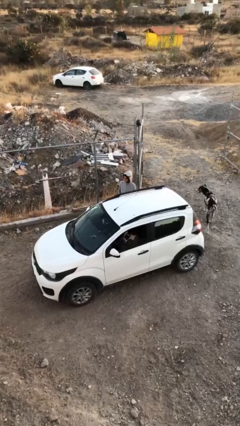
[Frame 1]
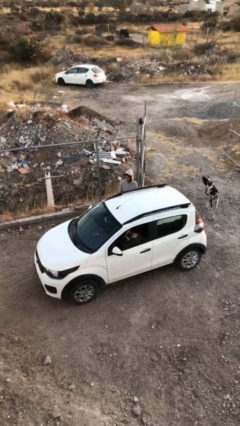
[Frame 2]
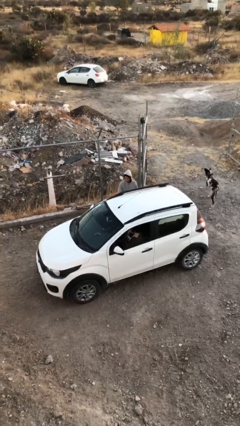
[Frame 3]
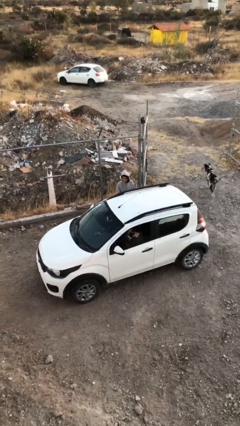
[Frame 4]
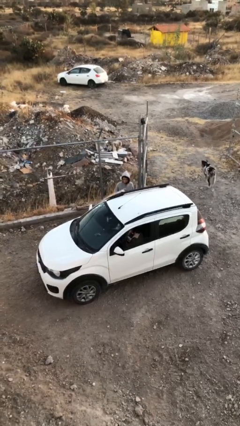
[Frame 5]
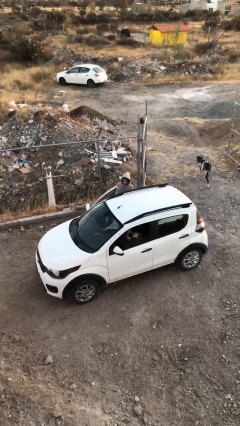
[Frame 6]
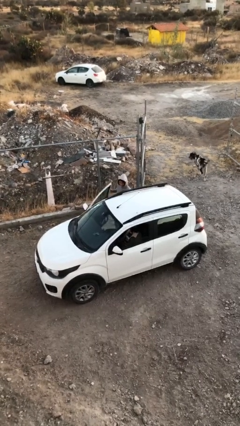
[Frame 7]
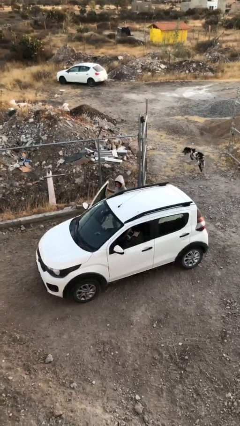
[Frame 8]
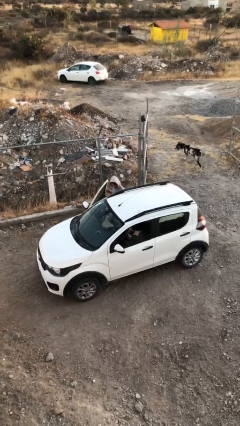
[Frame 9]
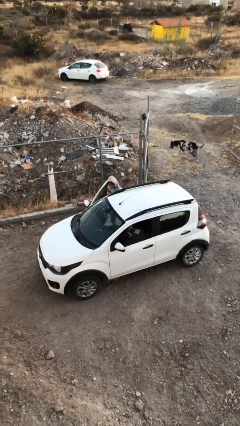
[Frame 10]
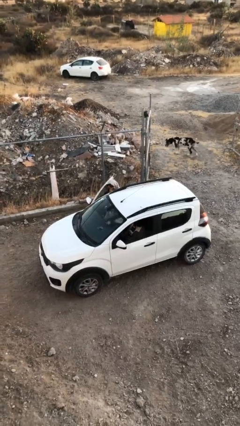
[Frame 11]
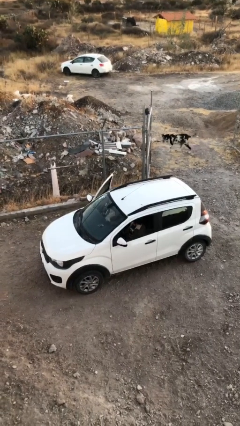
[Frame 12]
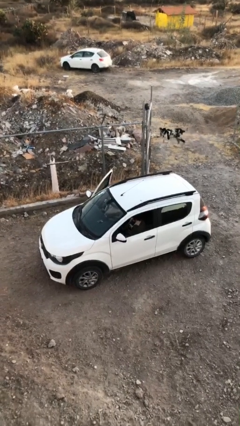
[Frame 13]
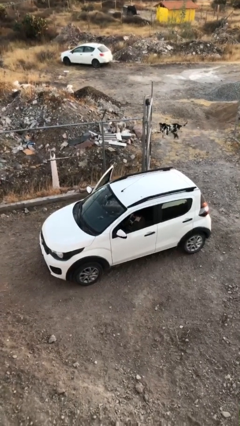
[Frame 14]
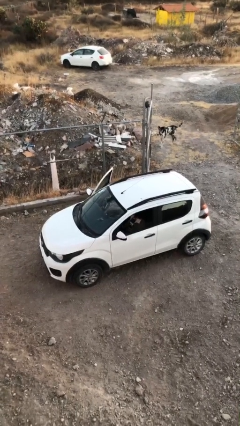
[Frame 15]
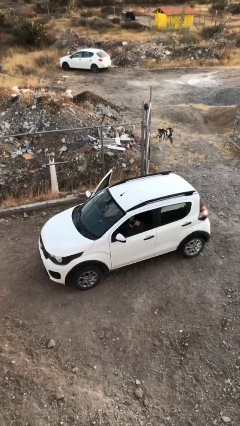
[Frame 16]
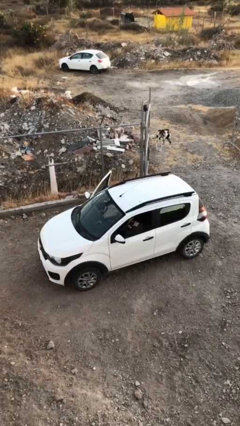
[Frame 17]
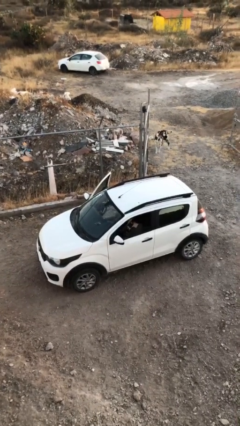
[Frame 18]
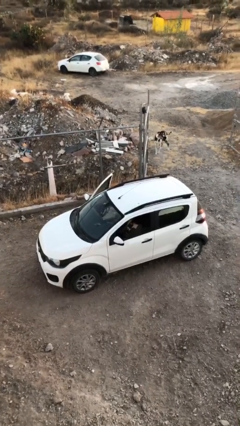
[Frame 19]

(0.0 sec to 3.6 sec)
car picks up person

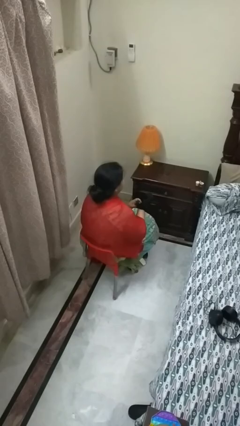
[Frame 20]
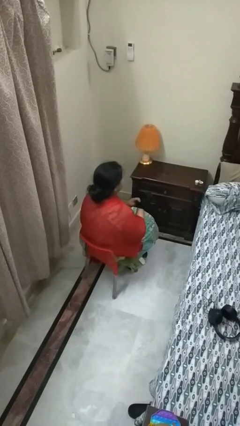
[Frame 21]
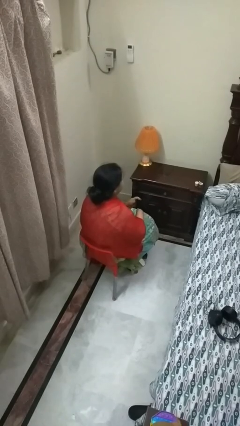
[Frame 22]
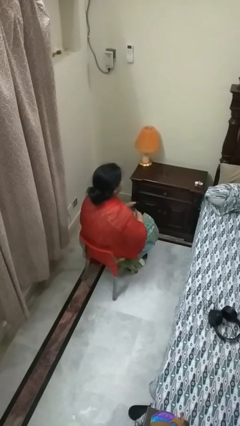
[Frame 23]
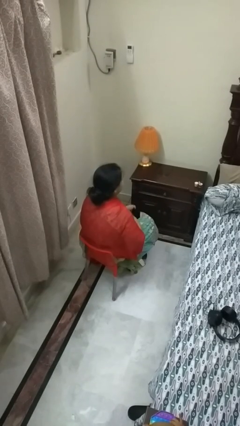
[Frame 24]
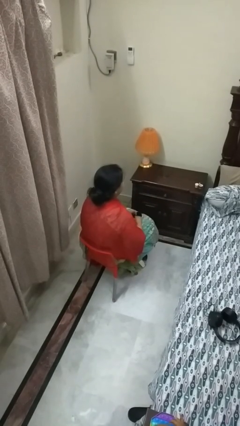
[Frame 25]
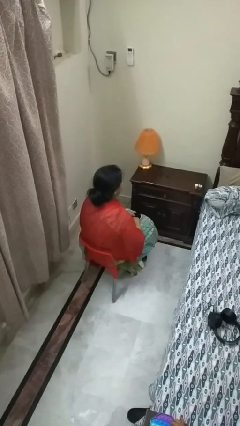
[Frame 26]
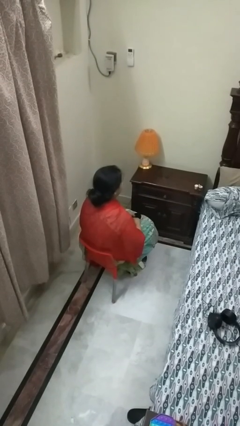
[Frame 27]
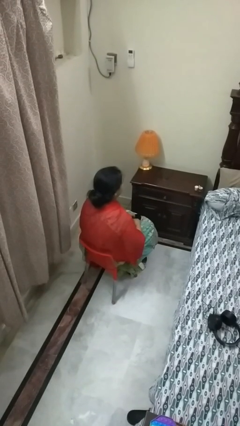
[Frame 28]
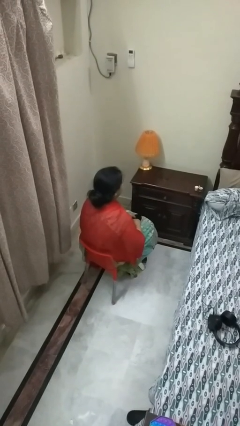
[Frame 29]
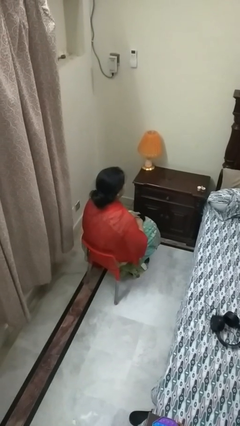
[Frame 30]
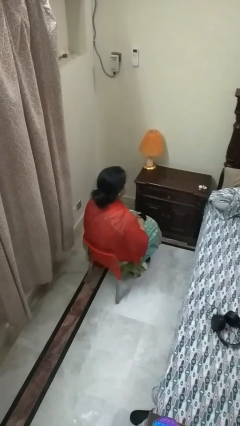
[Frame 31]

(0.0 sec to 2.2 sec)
person takes off gloves

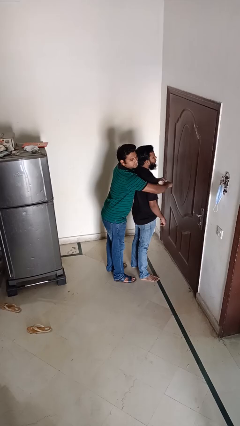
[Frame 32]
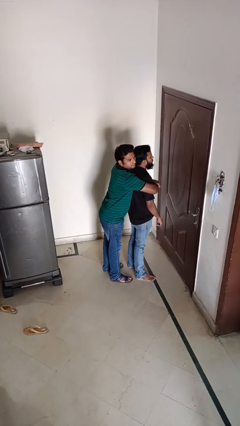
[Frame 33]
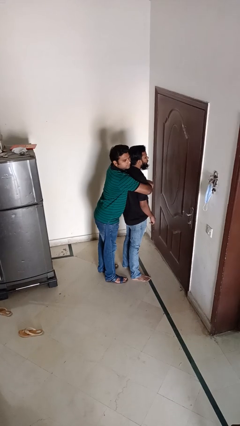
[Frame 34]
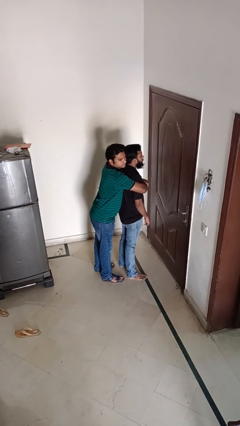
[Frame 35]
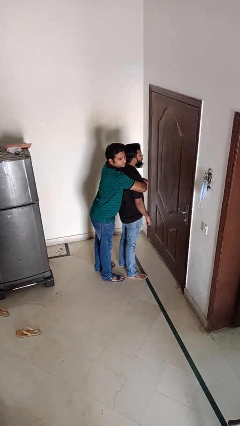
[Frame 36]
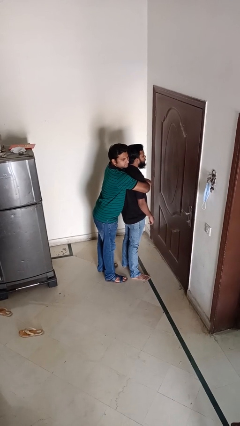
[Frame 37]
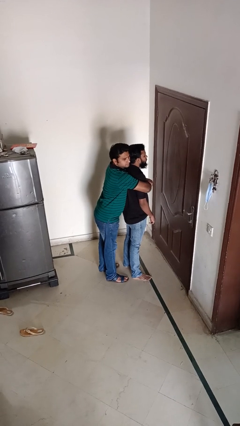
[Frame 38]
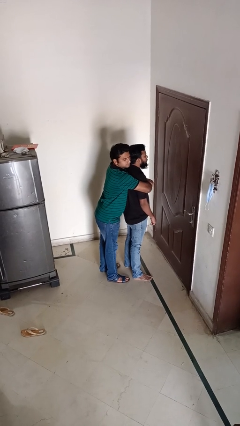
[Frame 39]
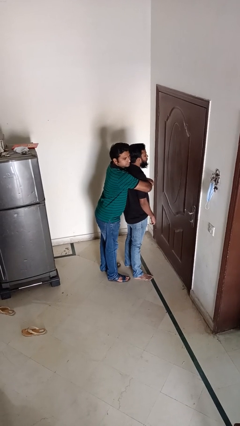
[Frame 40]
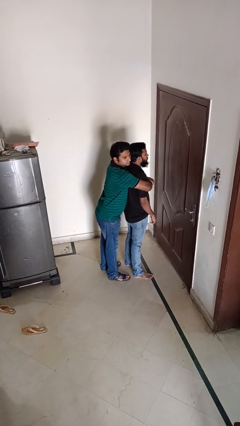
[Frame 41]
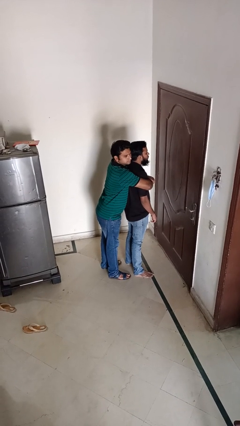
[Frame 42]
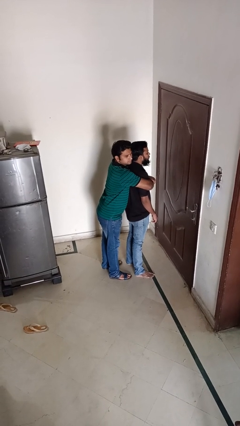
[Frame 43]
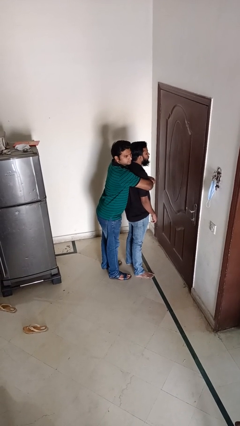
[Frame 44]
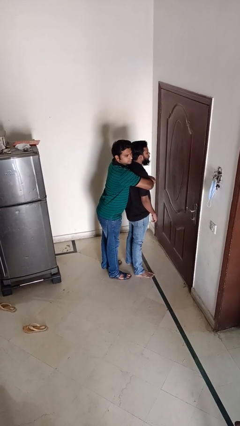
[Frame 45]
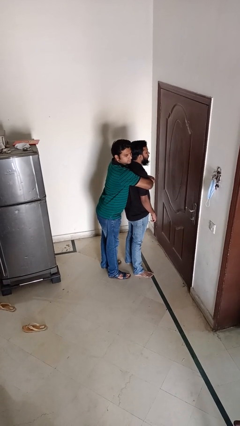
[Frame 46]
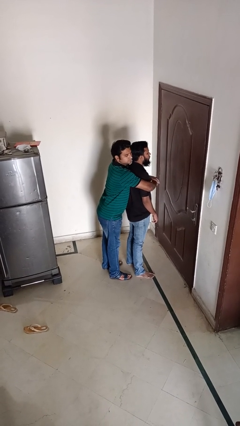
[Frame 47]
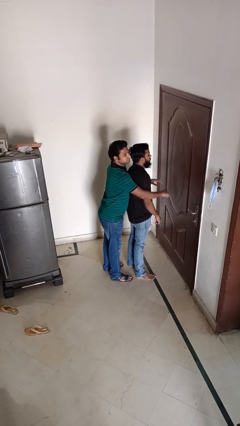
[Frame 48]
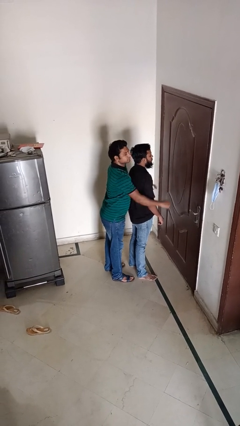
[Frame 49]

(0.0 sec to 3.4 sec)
person hugs person from behind

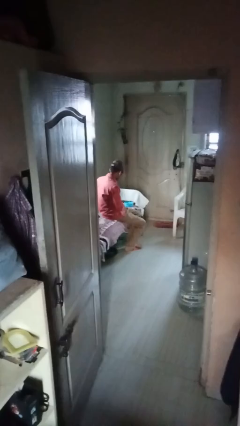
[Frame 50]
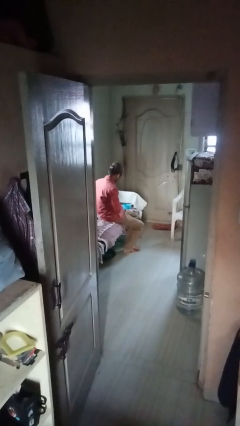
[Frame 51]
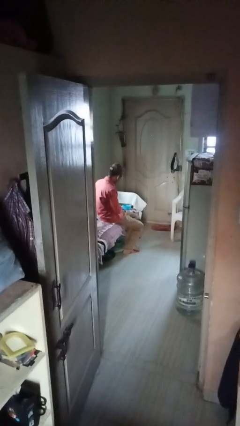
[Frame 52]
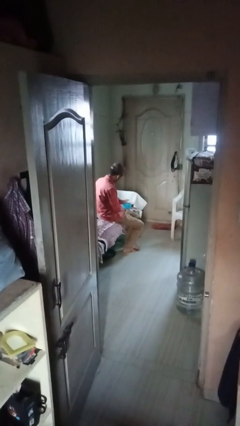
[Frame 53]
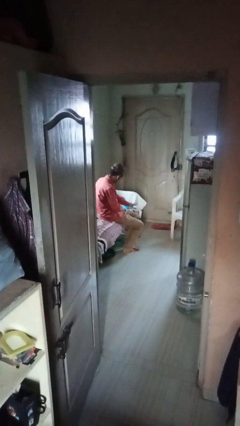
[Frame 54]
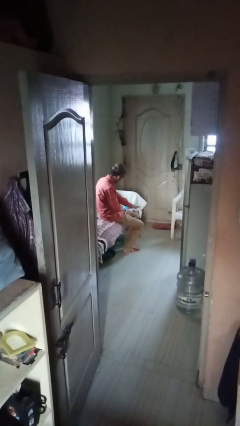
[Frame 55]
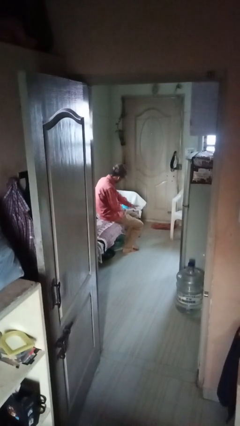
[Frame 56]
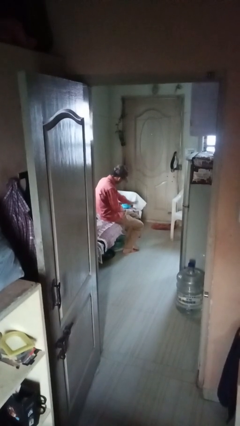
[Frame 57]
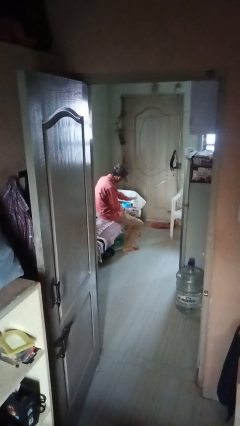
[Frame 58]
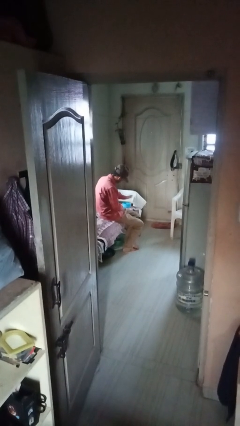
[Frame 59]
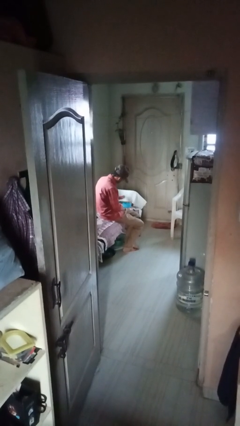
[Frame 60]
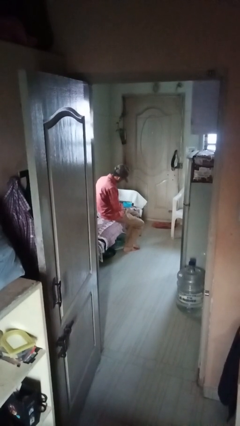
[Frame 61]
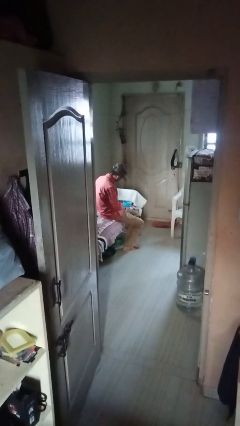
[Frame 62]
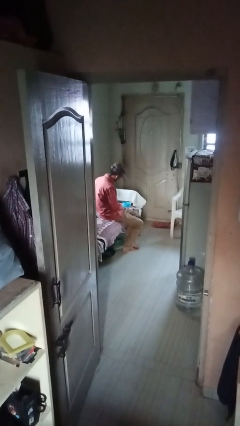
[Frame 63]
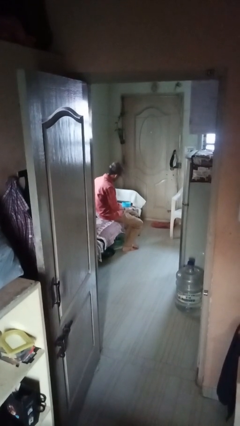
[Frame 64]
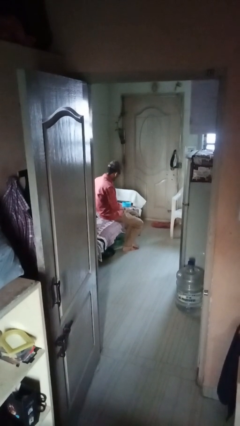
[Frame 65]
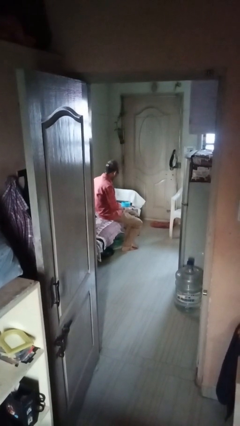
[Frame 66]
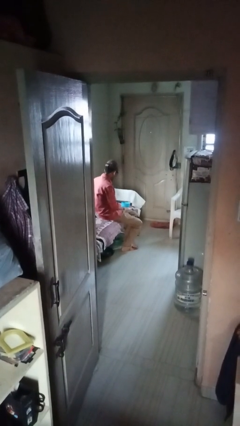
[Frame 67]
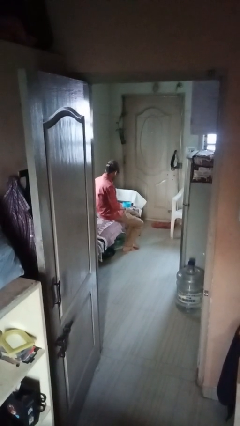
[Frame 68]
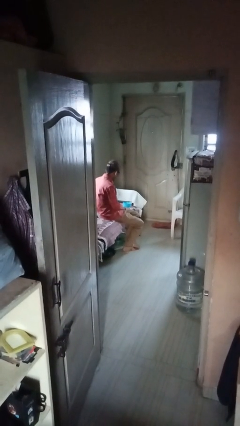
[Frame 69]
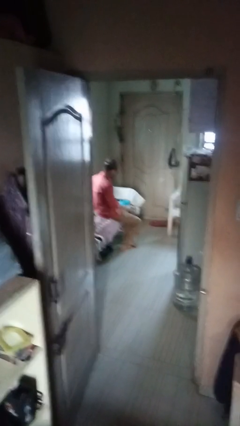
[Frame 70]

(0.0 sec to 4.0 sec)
person waves hand over object

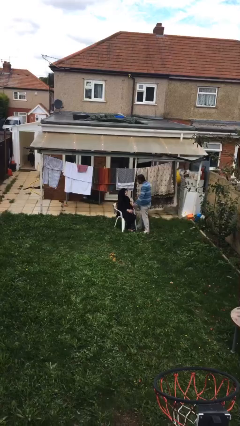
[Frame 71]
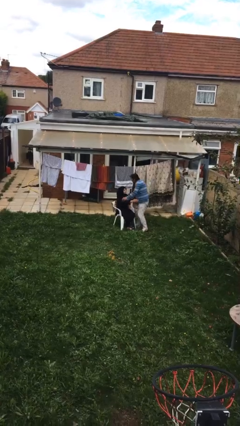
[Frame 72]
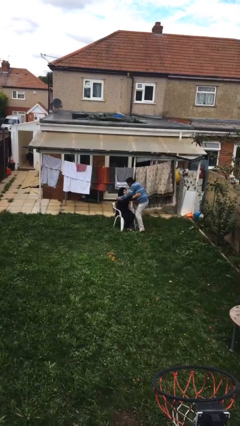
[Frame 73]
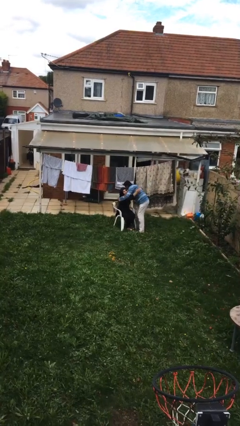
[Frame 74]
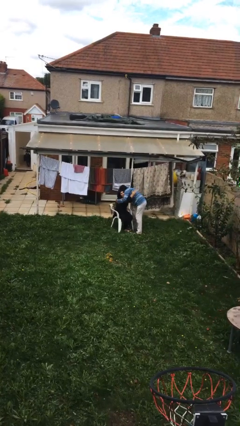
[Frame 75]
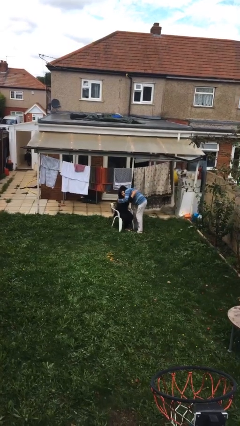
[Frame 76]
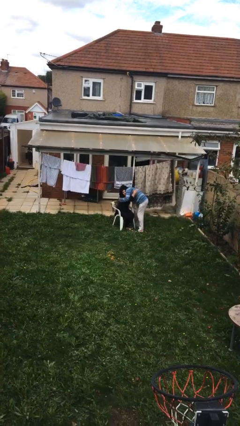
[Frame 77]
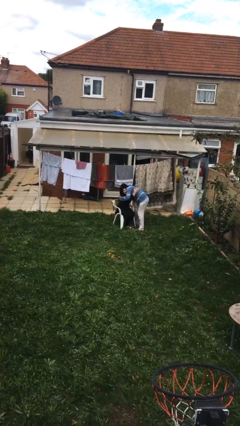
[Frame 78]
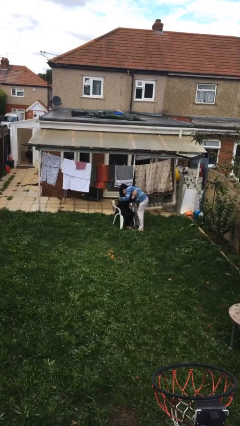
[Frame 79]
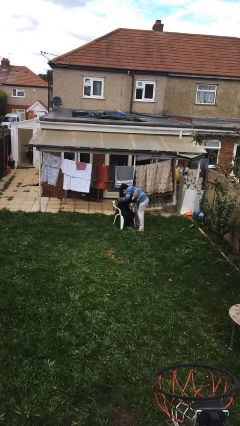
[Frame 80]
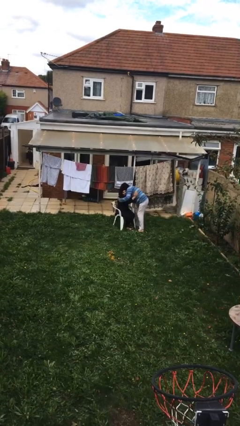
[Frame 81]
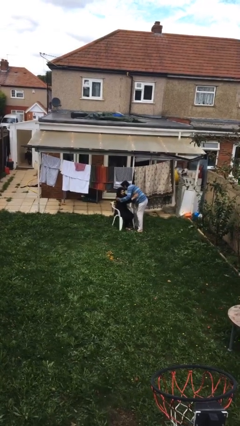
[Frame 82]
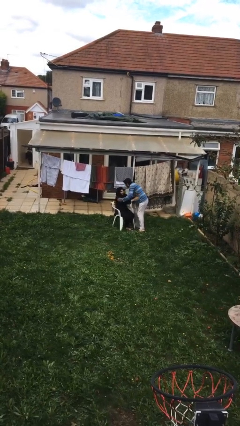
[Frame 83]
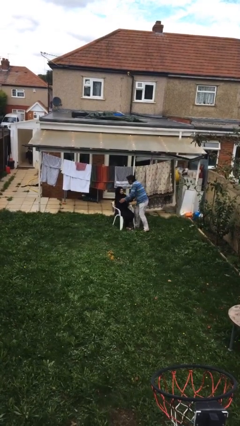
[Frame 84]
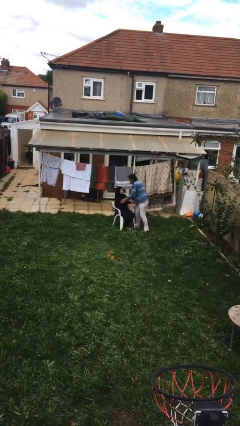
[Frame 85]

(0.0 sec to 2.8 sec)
person embraces person

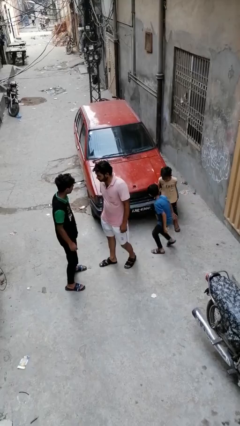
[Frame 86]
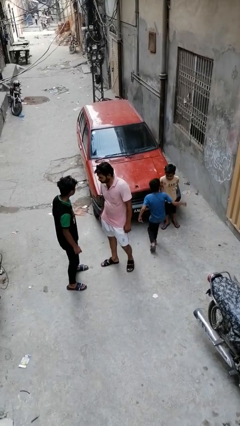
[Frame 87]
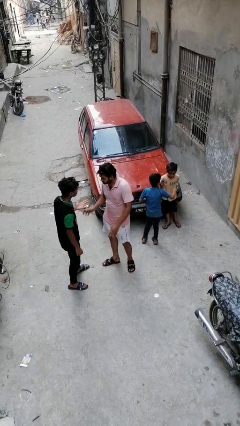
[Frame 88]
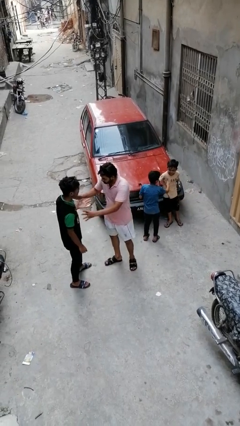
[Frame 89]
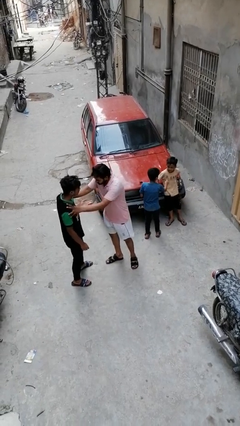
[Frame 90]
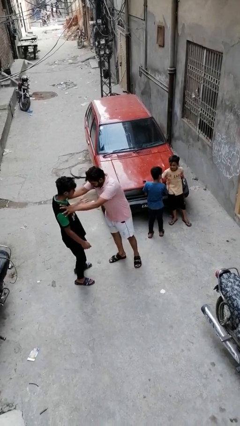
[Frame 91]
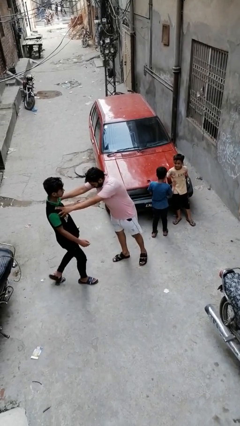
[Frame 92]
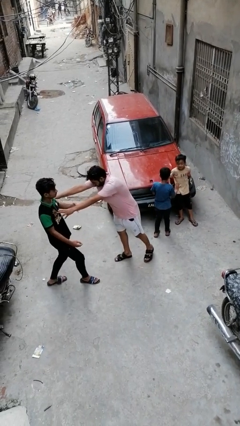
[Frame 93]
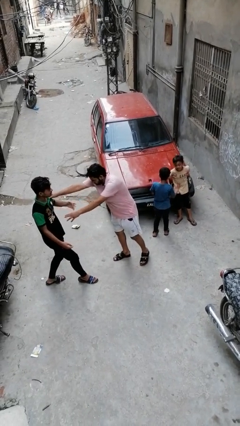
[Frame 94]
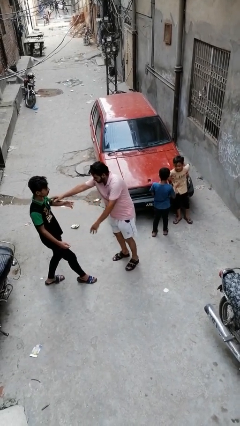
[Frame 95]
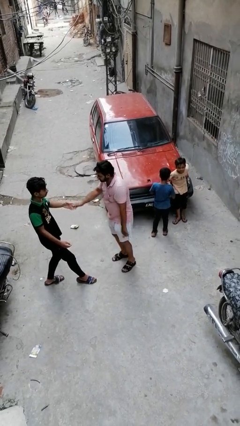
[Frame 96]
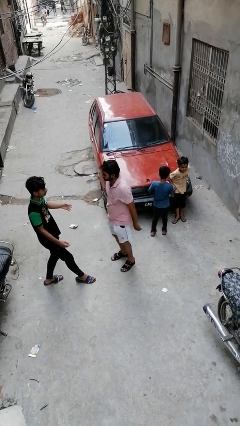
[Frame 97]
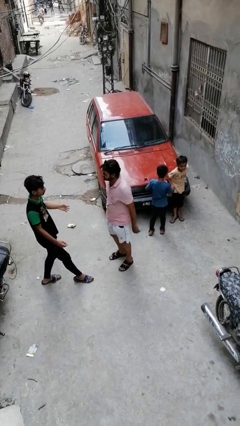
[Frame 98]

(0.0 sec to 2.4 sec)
person shoves person
